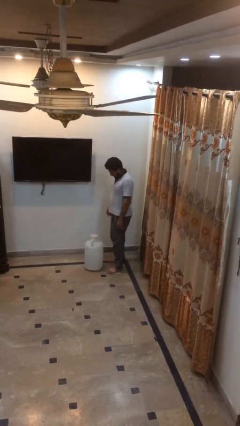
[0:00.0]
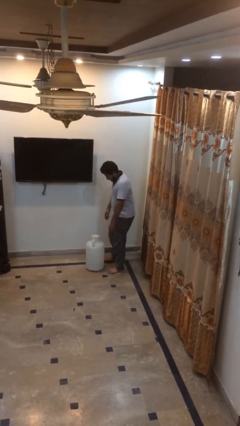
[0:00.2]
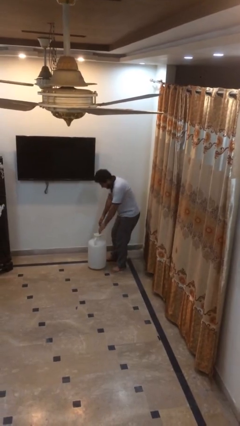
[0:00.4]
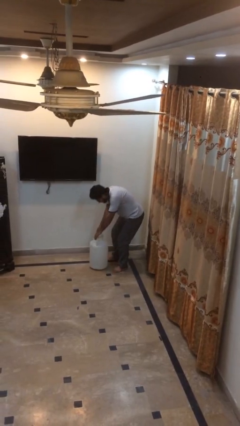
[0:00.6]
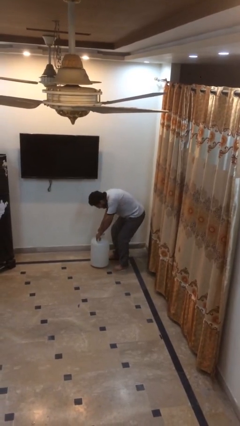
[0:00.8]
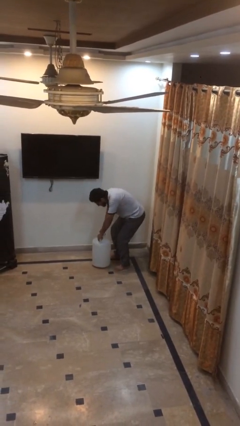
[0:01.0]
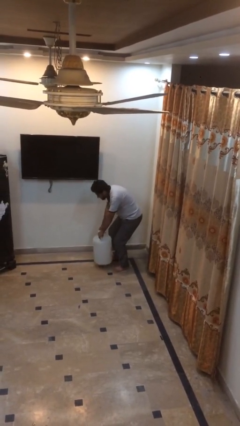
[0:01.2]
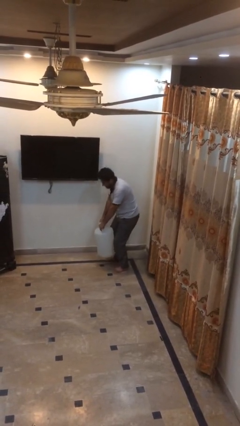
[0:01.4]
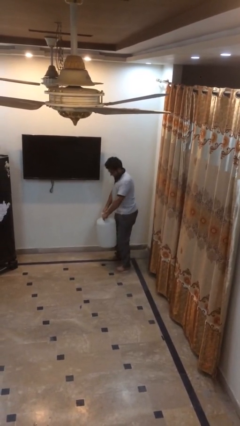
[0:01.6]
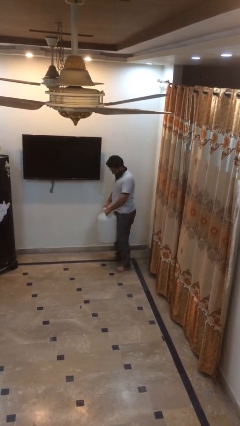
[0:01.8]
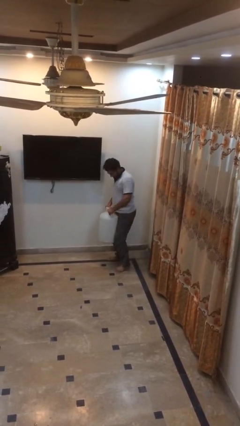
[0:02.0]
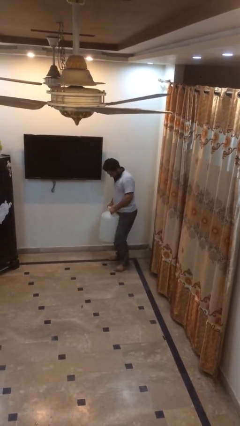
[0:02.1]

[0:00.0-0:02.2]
person picks up object from floor

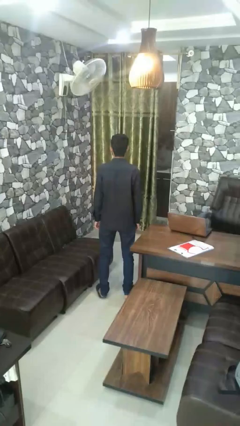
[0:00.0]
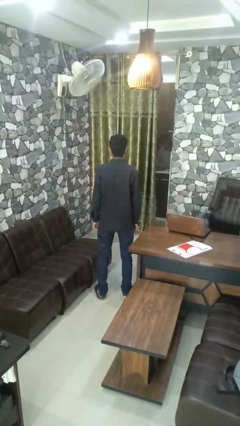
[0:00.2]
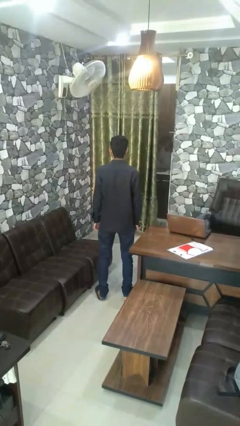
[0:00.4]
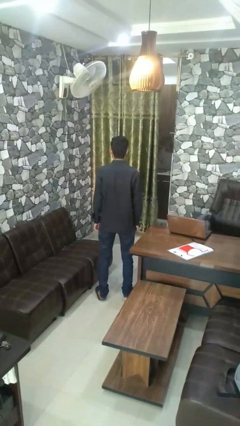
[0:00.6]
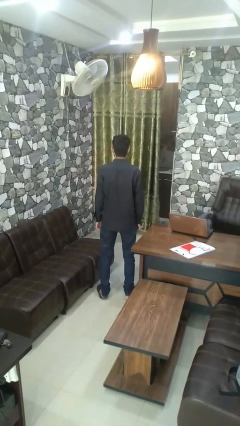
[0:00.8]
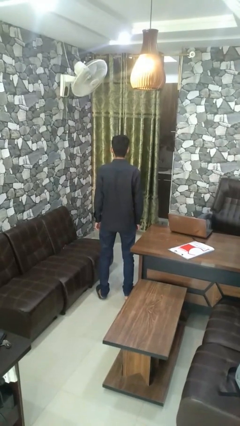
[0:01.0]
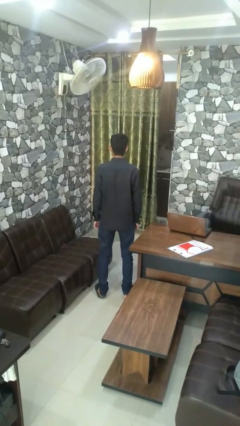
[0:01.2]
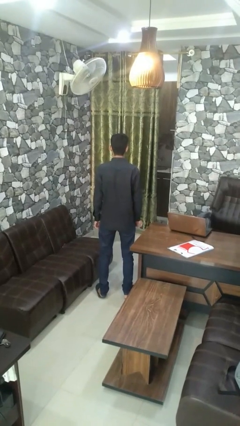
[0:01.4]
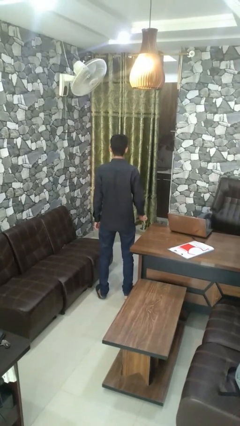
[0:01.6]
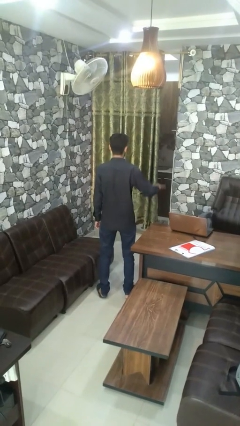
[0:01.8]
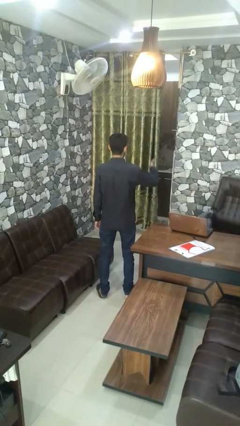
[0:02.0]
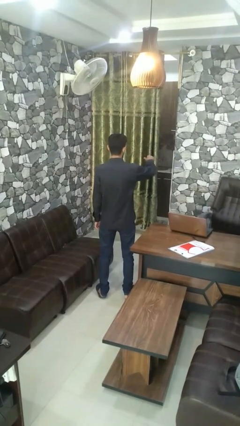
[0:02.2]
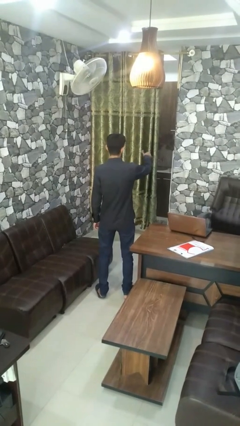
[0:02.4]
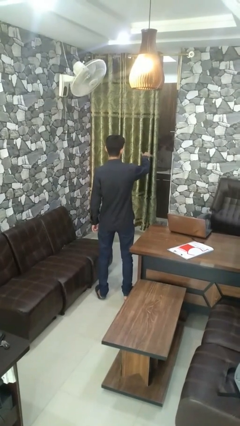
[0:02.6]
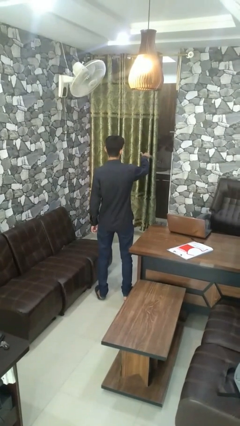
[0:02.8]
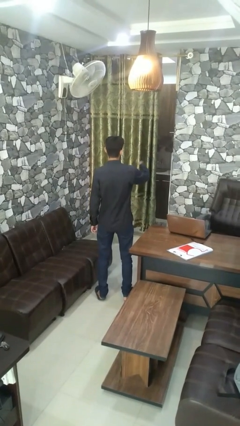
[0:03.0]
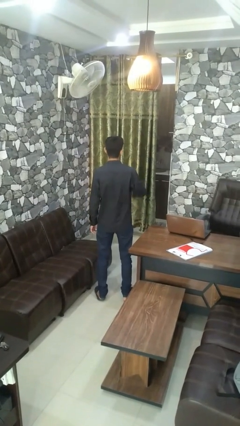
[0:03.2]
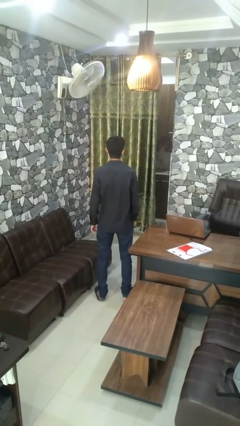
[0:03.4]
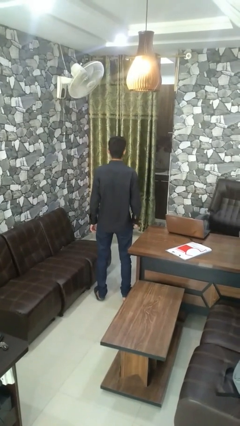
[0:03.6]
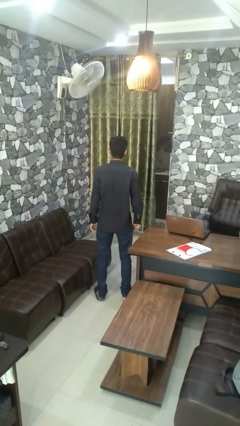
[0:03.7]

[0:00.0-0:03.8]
person gestures hang loose

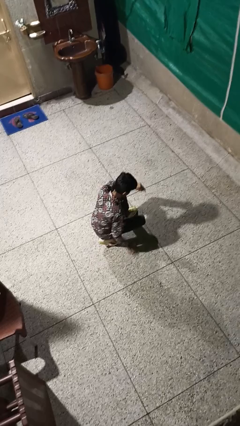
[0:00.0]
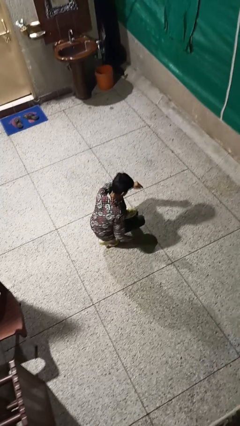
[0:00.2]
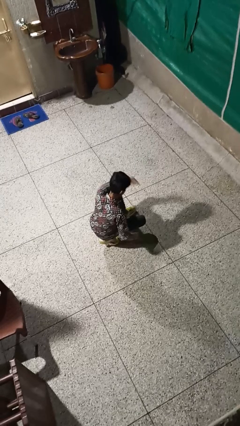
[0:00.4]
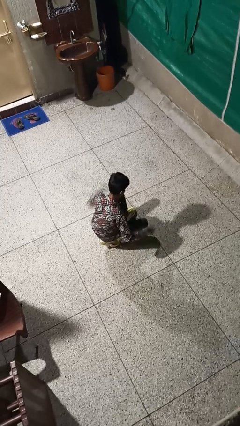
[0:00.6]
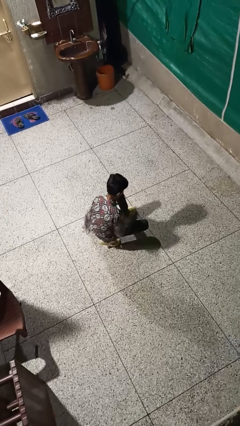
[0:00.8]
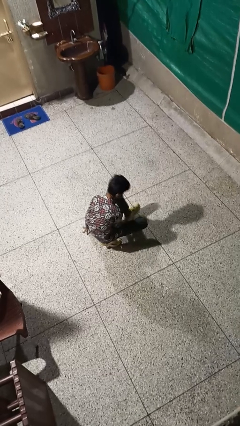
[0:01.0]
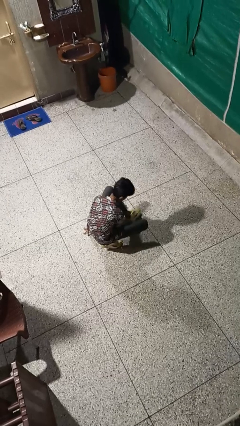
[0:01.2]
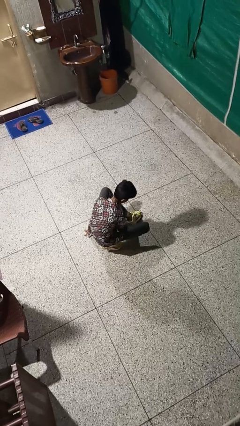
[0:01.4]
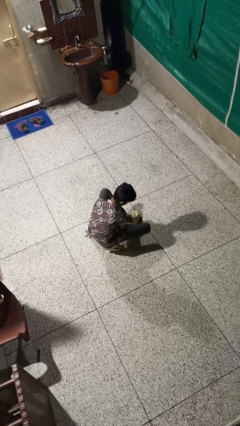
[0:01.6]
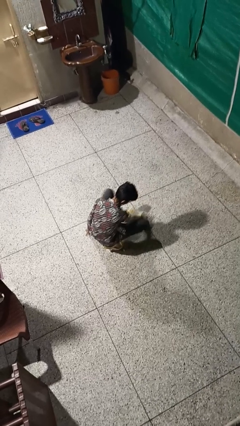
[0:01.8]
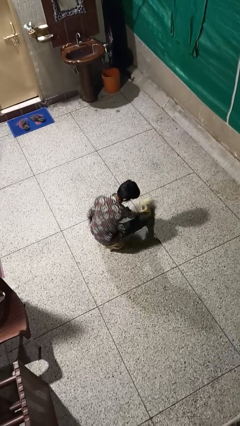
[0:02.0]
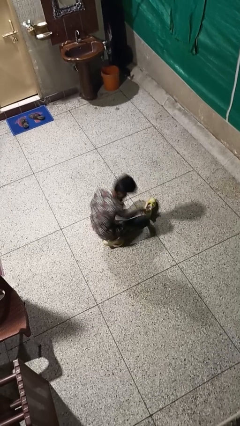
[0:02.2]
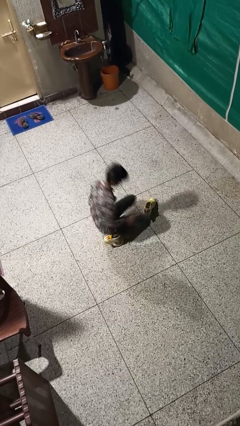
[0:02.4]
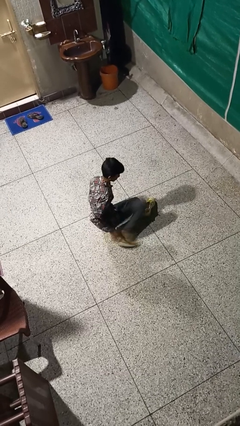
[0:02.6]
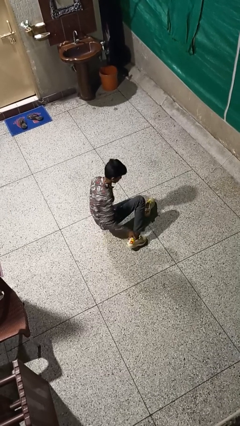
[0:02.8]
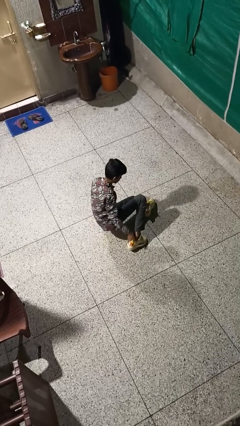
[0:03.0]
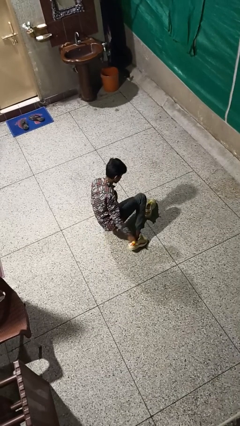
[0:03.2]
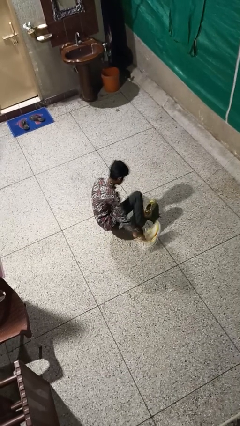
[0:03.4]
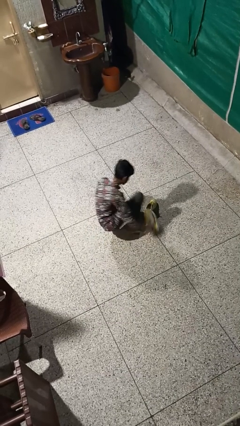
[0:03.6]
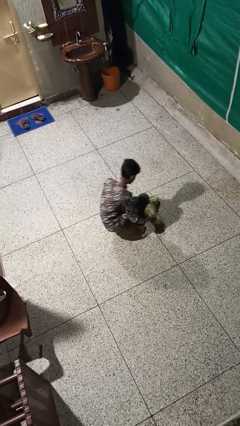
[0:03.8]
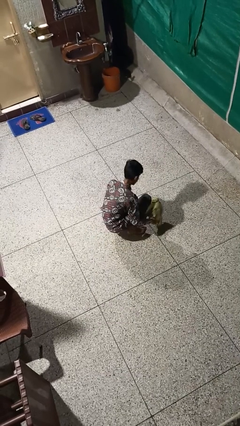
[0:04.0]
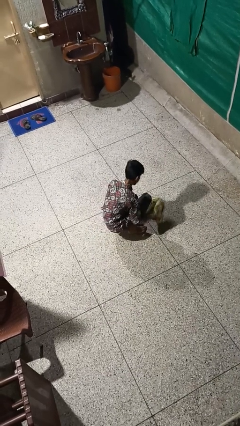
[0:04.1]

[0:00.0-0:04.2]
person takes off shoes

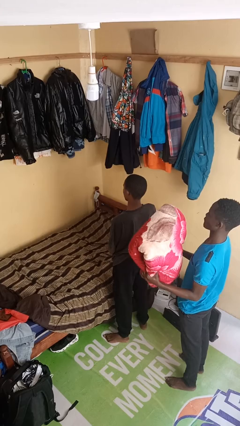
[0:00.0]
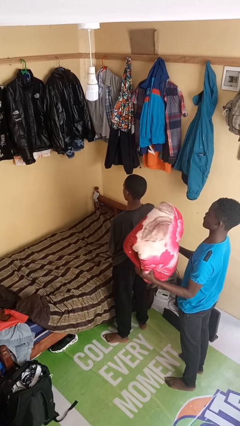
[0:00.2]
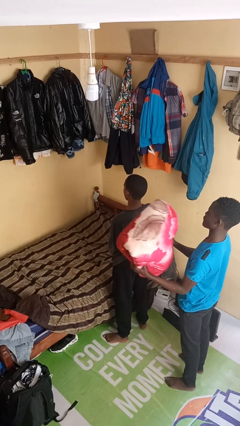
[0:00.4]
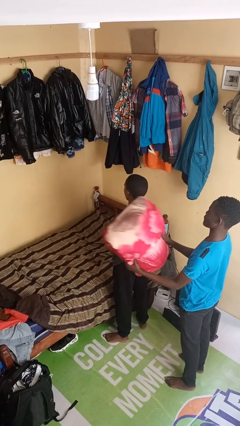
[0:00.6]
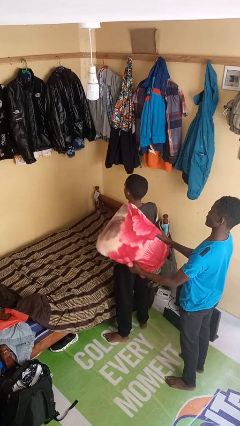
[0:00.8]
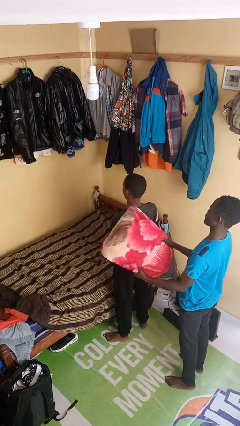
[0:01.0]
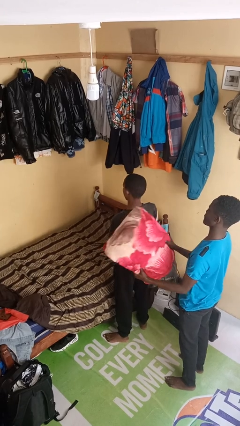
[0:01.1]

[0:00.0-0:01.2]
person hits person with pillow

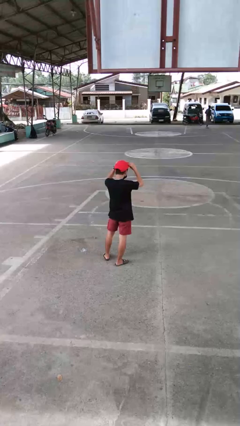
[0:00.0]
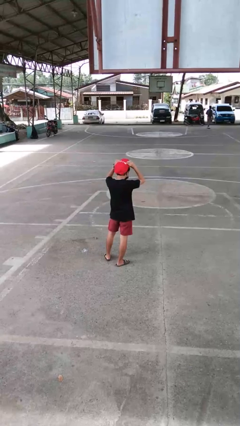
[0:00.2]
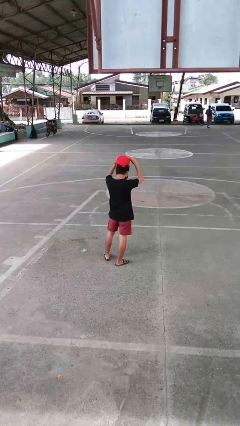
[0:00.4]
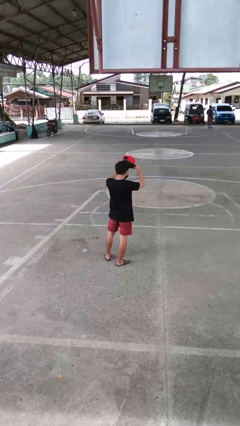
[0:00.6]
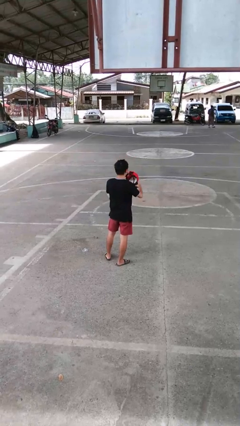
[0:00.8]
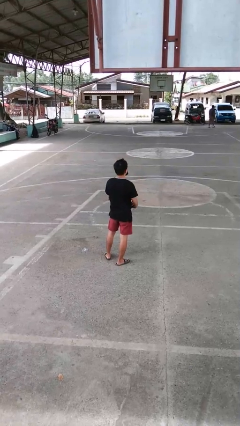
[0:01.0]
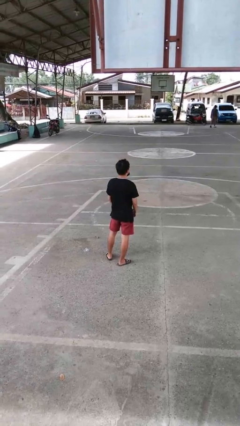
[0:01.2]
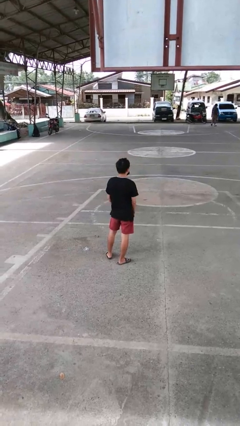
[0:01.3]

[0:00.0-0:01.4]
person takes off hat

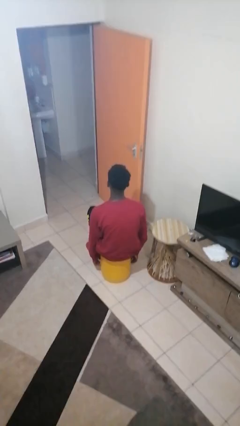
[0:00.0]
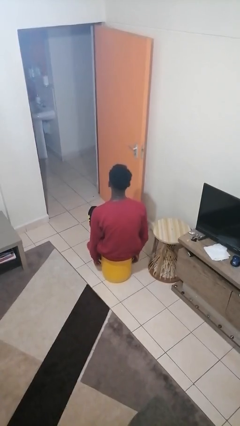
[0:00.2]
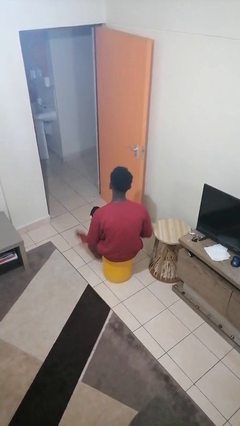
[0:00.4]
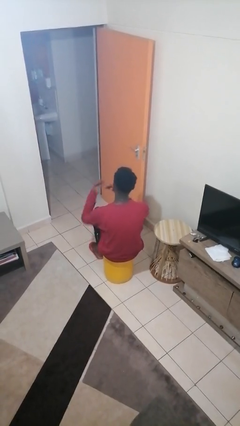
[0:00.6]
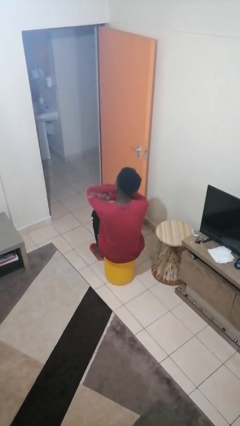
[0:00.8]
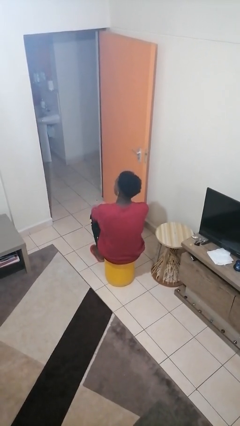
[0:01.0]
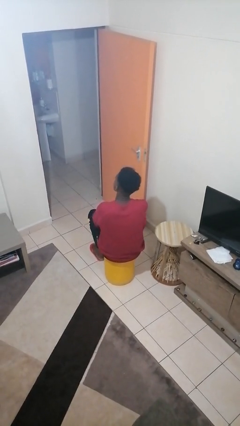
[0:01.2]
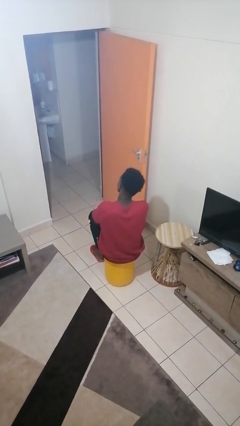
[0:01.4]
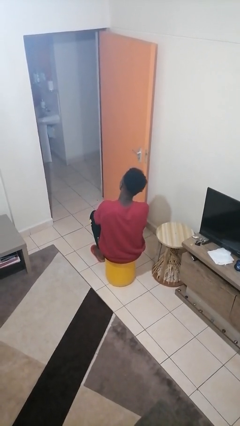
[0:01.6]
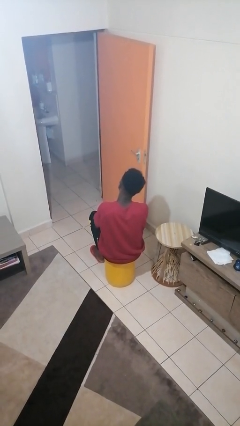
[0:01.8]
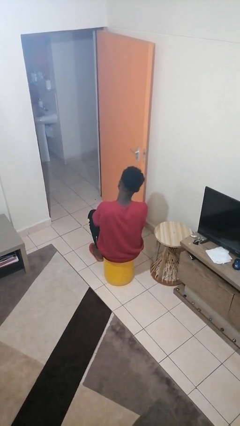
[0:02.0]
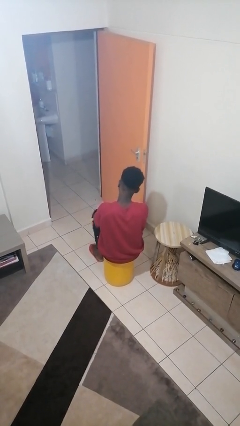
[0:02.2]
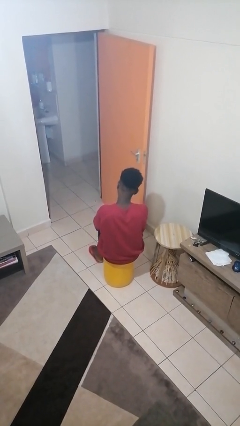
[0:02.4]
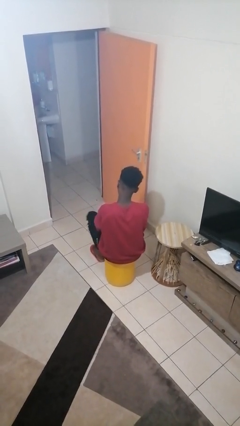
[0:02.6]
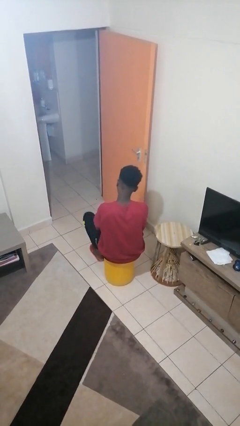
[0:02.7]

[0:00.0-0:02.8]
person crosses arms

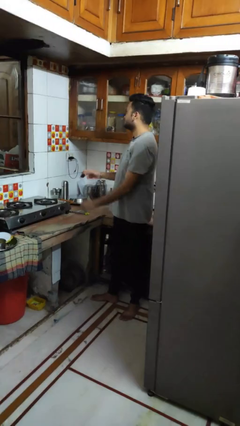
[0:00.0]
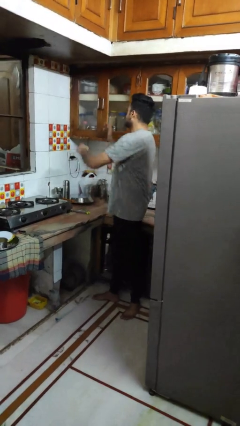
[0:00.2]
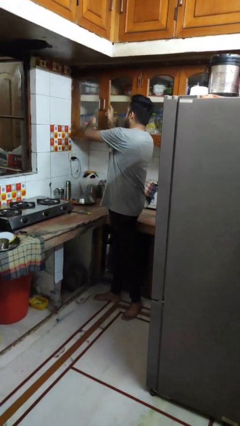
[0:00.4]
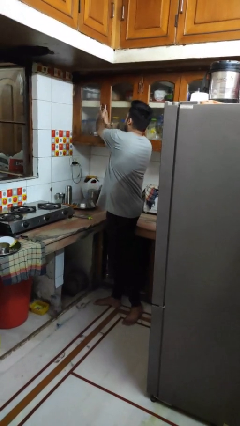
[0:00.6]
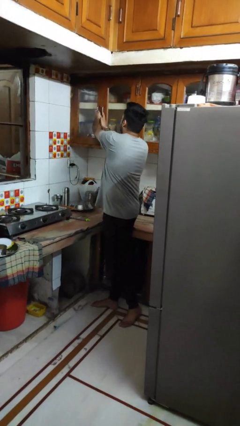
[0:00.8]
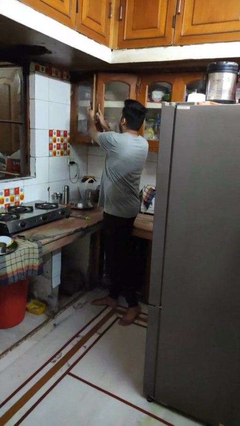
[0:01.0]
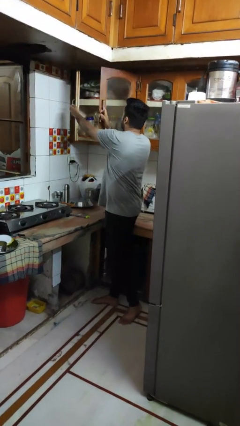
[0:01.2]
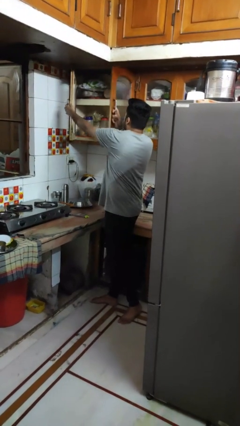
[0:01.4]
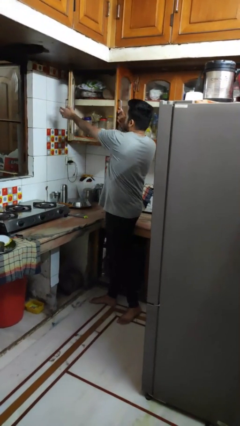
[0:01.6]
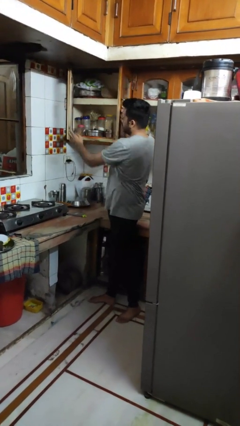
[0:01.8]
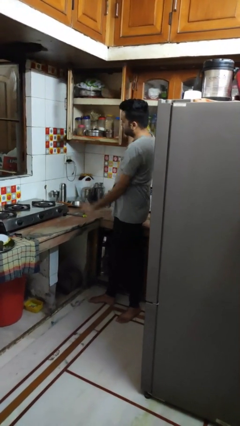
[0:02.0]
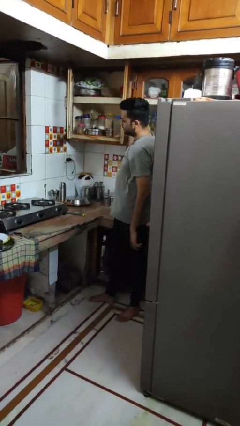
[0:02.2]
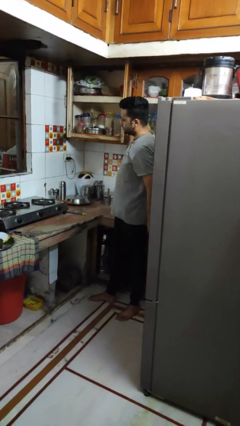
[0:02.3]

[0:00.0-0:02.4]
person opens cabinet
